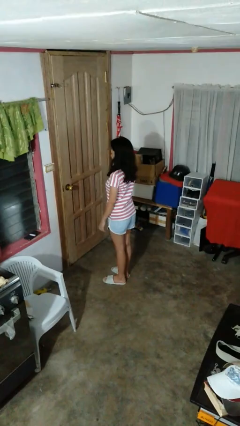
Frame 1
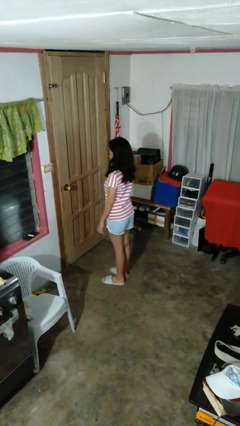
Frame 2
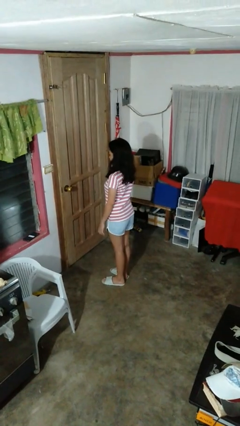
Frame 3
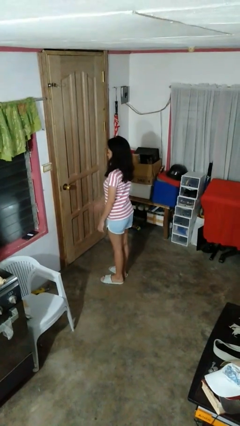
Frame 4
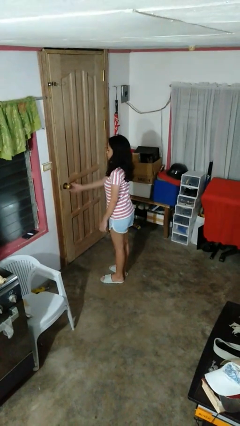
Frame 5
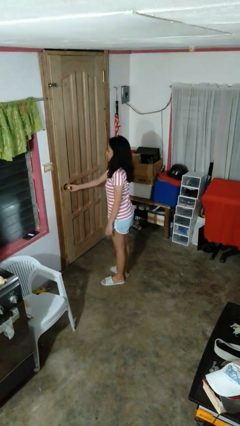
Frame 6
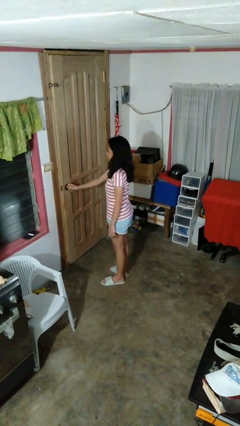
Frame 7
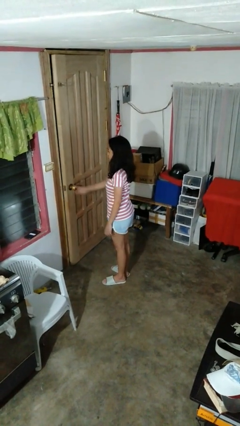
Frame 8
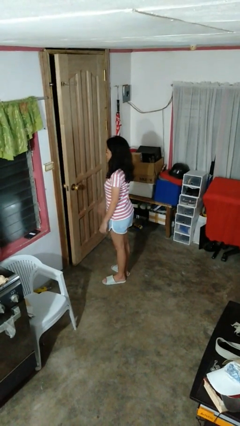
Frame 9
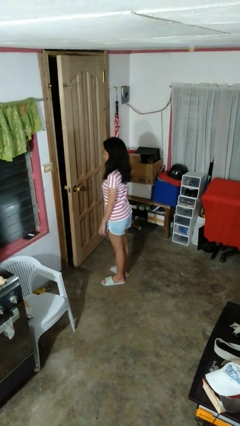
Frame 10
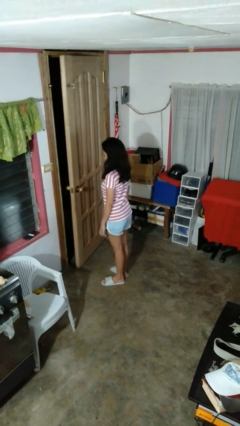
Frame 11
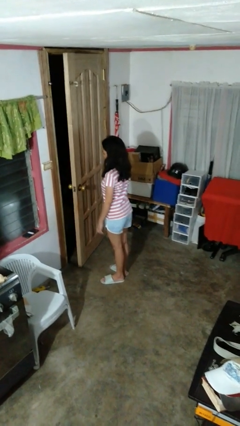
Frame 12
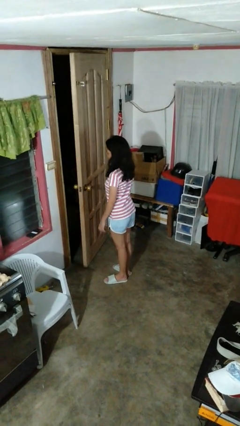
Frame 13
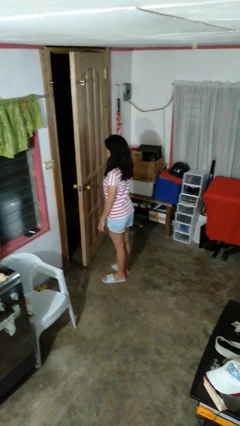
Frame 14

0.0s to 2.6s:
person opens facility door

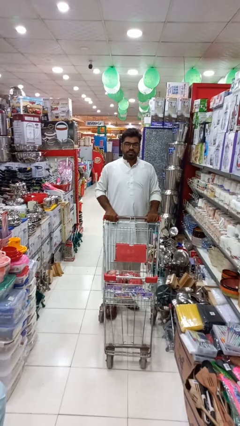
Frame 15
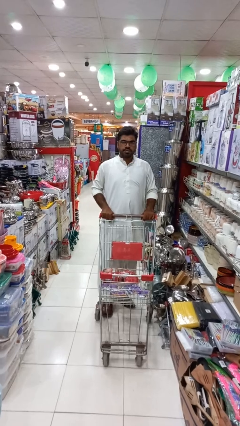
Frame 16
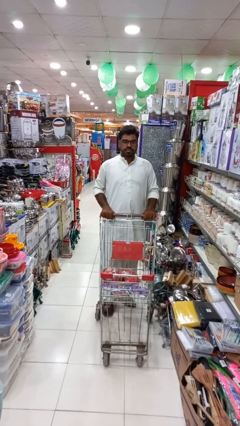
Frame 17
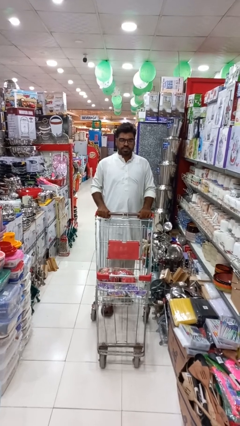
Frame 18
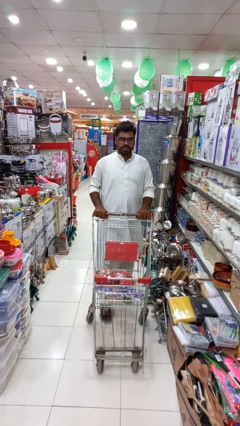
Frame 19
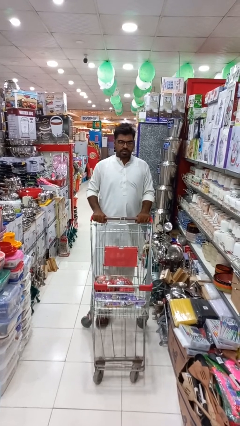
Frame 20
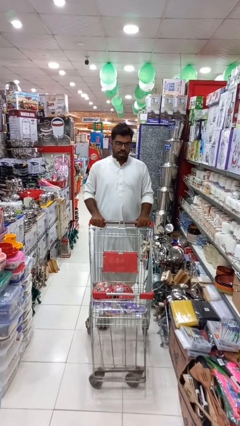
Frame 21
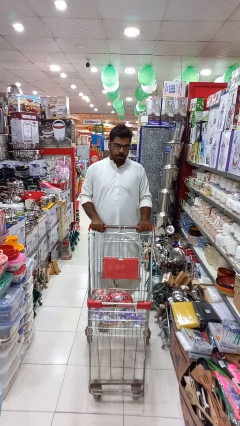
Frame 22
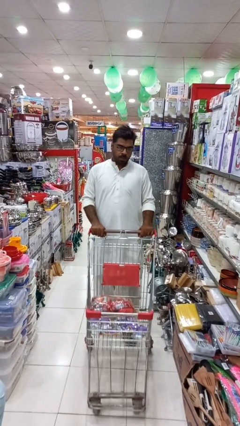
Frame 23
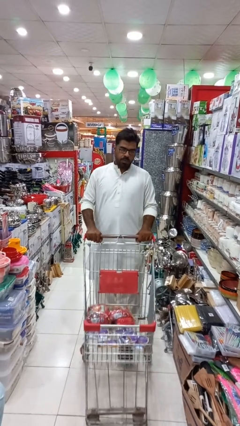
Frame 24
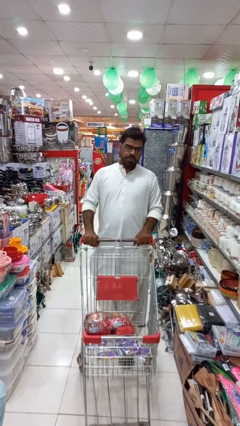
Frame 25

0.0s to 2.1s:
person pushes wheeled cart

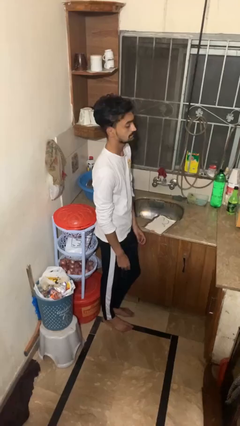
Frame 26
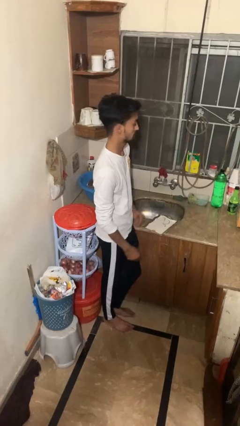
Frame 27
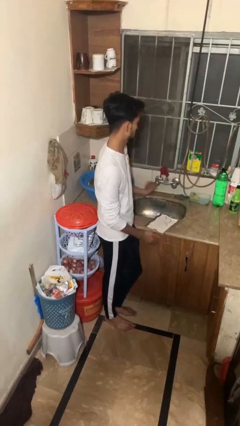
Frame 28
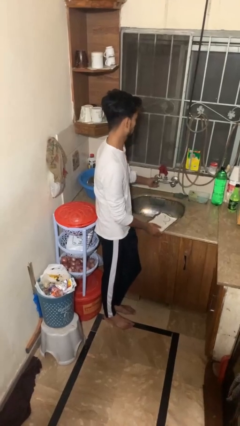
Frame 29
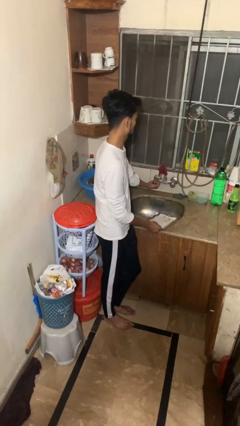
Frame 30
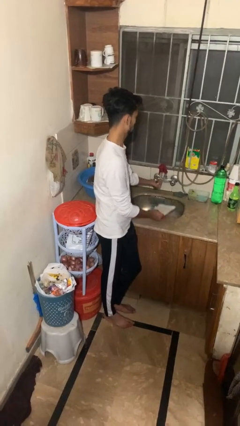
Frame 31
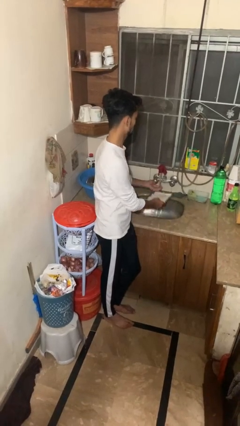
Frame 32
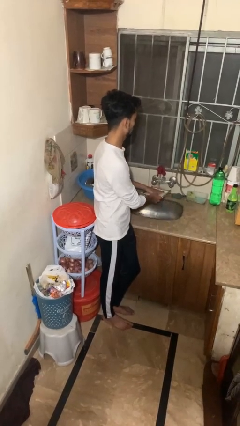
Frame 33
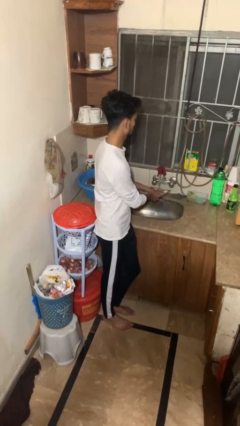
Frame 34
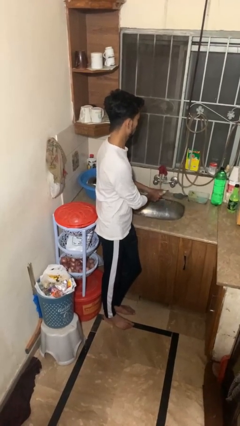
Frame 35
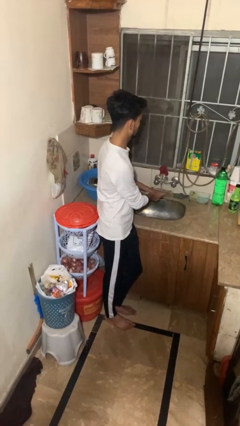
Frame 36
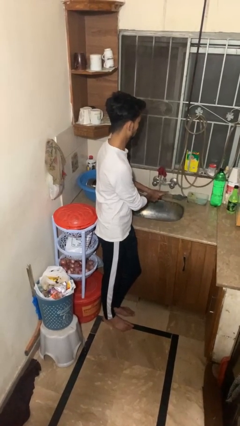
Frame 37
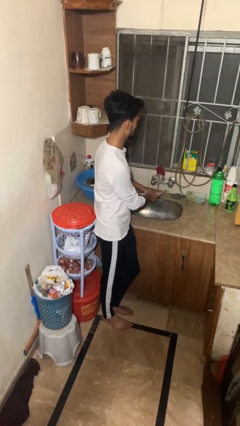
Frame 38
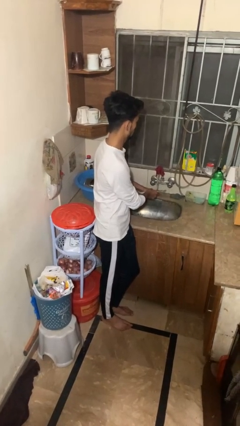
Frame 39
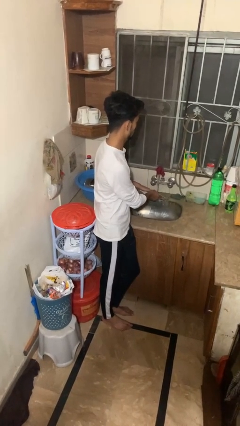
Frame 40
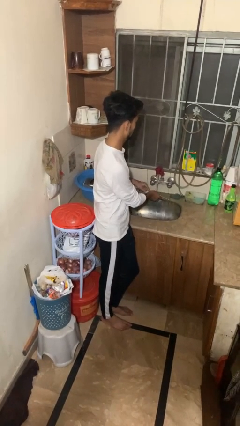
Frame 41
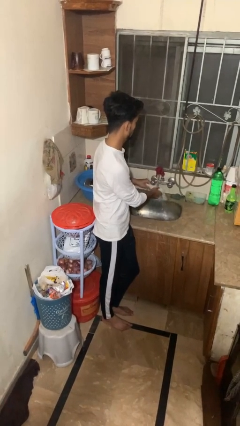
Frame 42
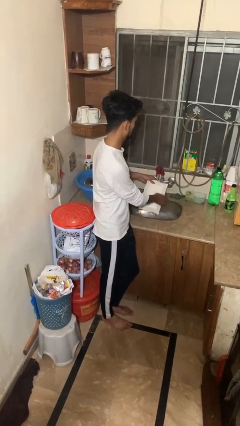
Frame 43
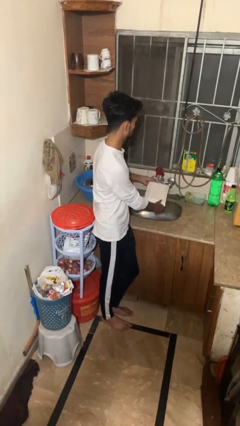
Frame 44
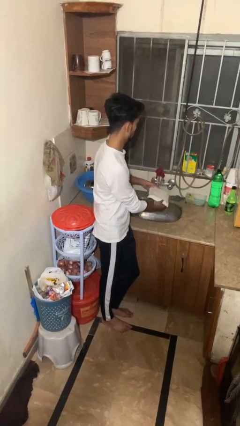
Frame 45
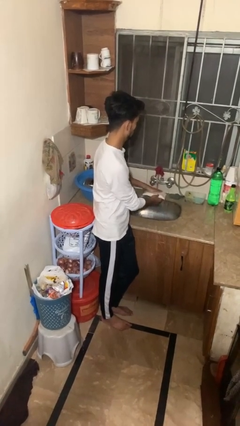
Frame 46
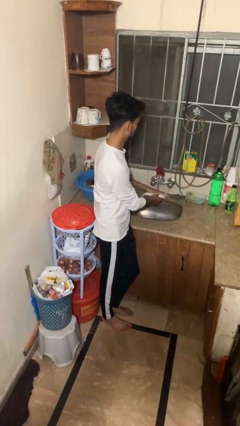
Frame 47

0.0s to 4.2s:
person opens dishwasher

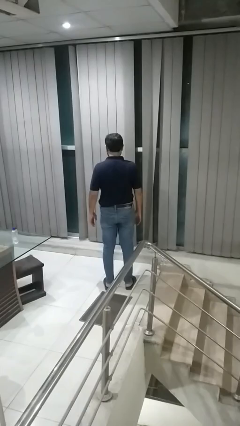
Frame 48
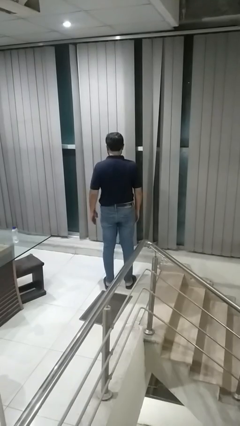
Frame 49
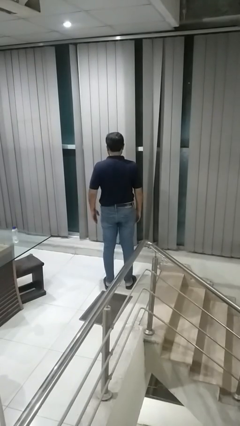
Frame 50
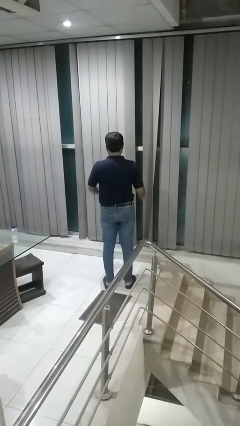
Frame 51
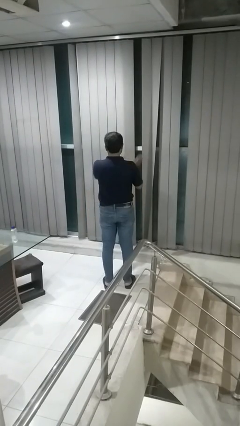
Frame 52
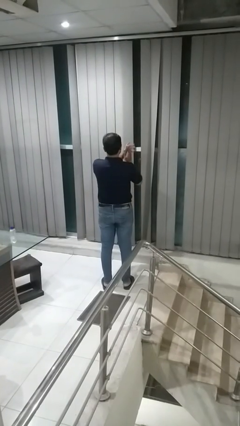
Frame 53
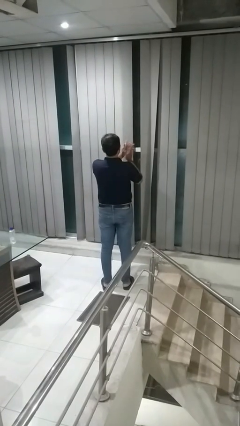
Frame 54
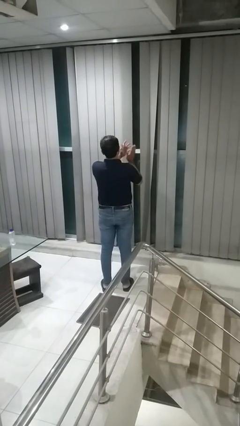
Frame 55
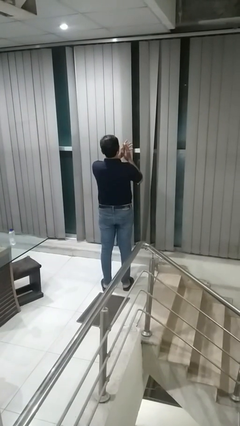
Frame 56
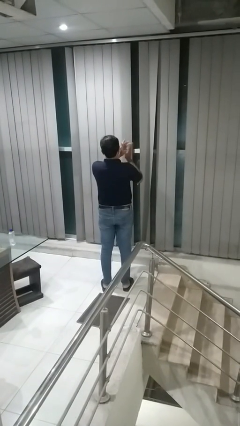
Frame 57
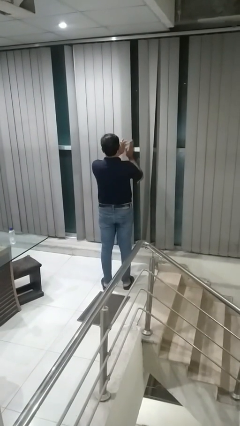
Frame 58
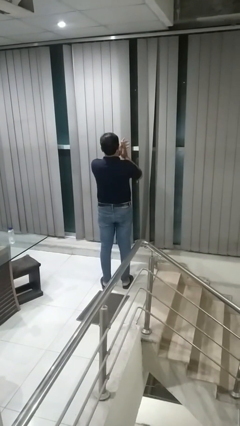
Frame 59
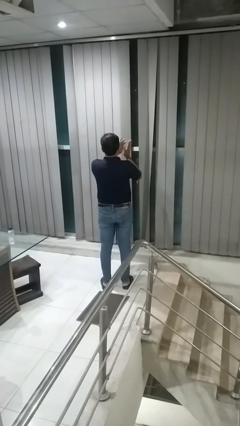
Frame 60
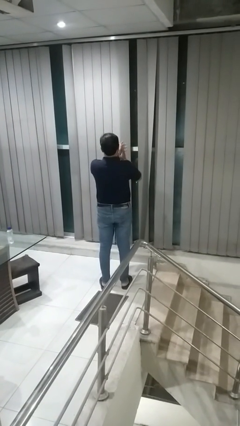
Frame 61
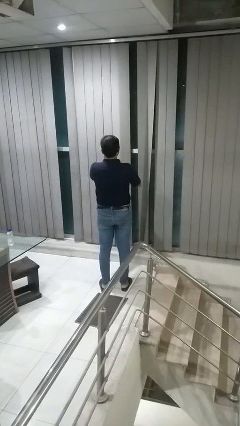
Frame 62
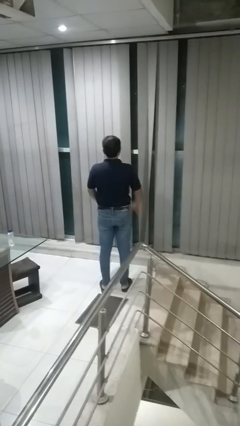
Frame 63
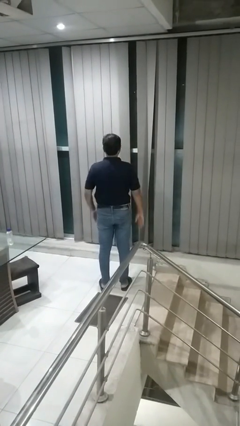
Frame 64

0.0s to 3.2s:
person claps hands

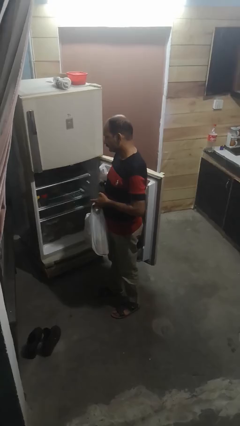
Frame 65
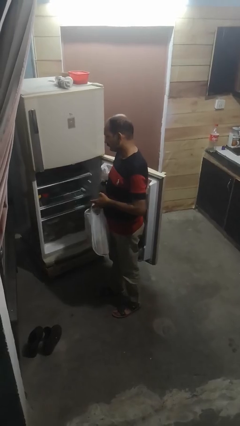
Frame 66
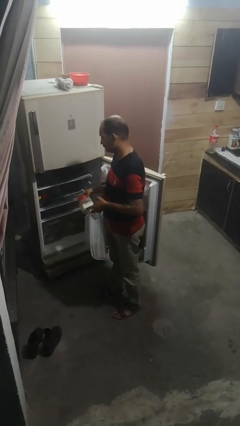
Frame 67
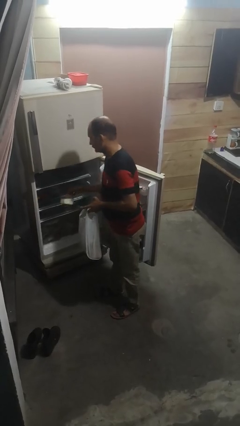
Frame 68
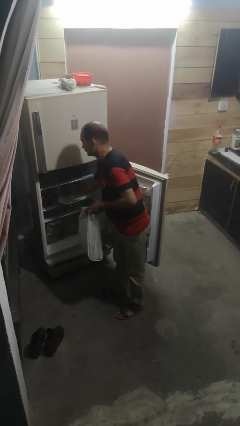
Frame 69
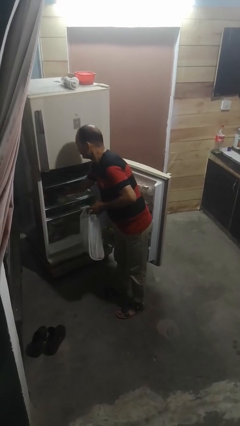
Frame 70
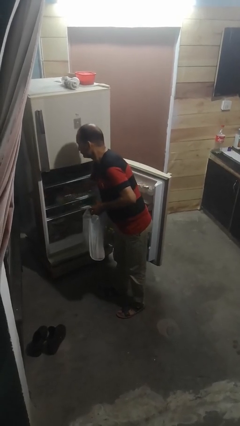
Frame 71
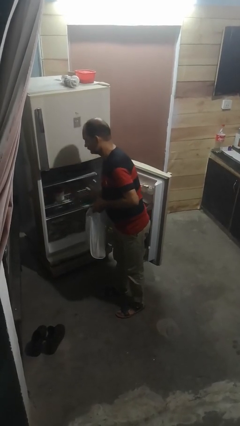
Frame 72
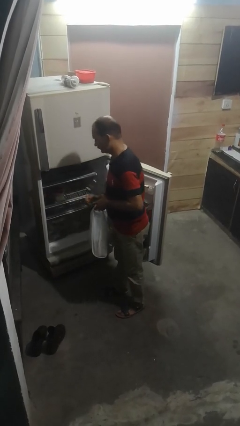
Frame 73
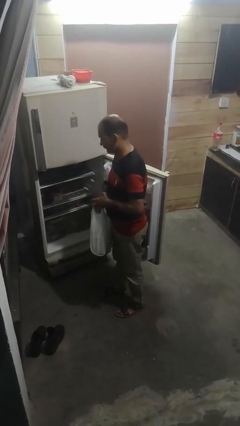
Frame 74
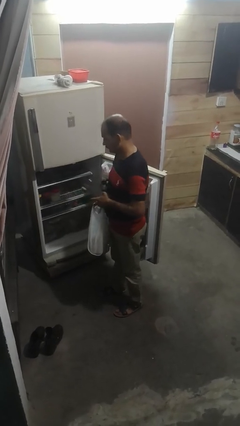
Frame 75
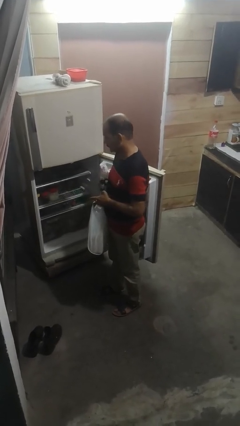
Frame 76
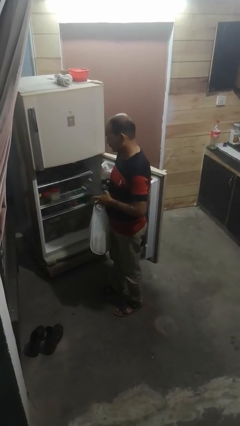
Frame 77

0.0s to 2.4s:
person loads groceries into refrigerator

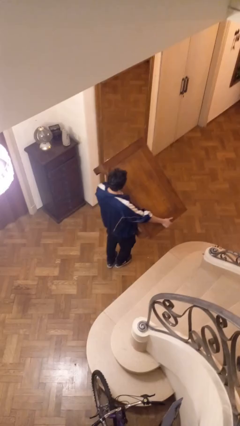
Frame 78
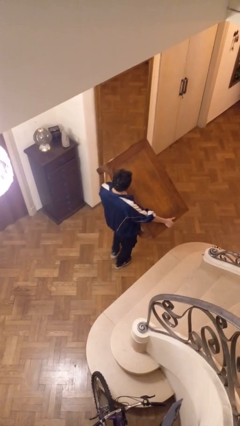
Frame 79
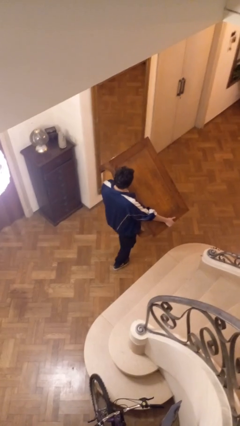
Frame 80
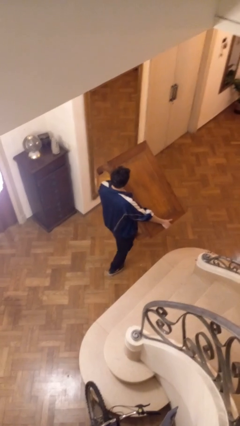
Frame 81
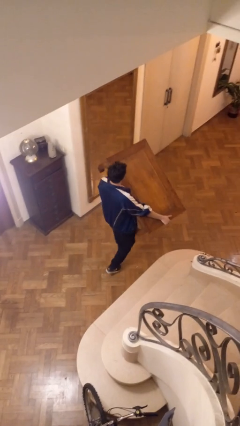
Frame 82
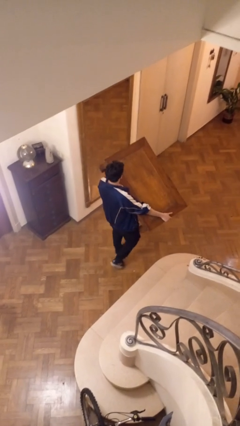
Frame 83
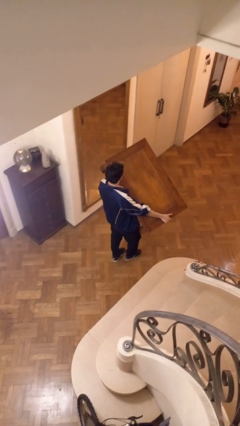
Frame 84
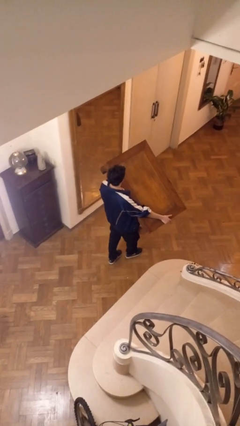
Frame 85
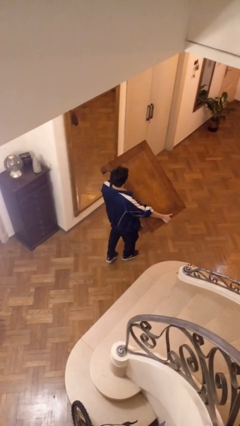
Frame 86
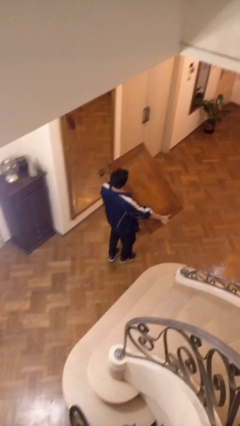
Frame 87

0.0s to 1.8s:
person carries furniture

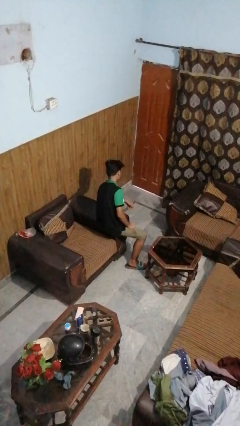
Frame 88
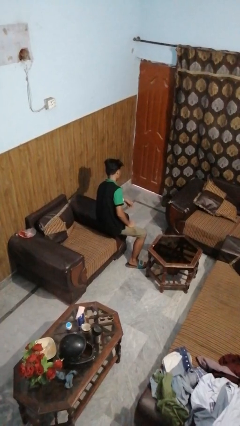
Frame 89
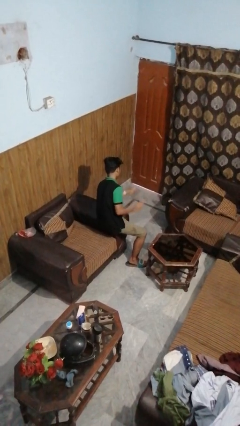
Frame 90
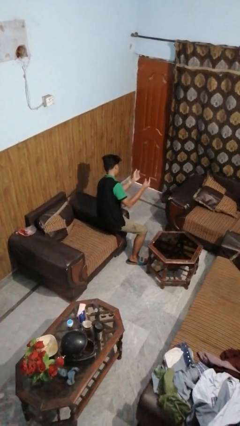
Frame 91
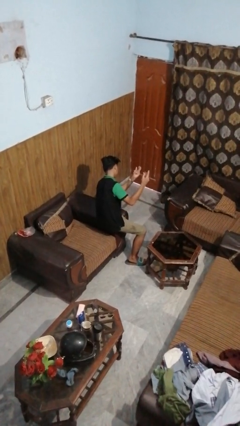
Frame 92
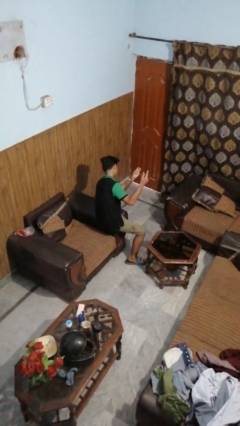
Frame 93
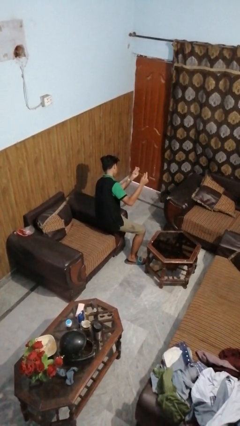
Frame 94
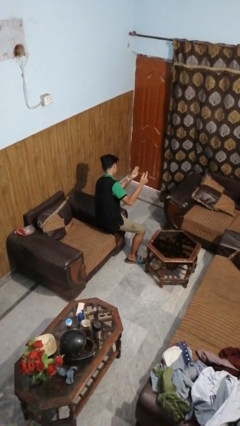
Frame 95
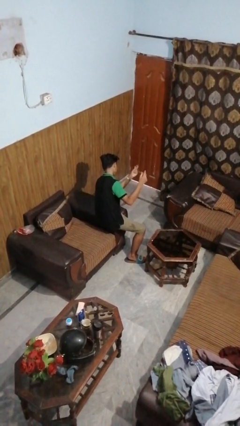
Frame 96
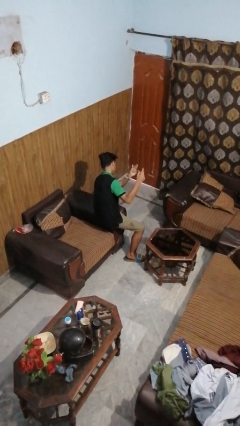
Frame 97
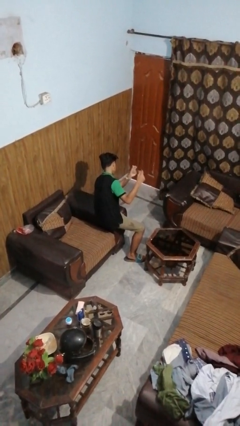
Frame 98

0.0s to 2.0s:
person snaps fingers
